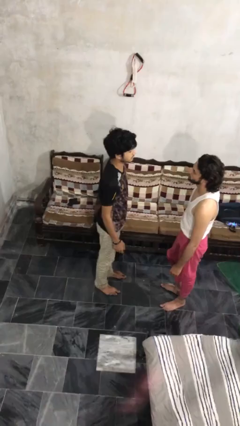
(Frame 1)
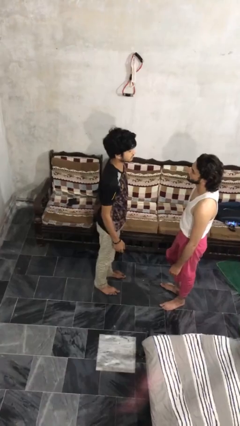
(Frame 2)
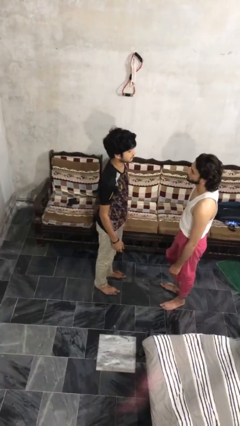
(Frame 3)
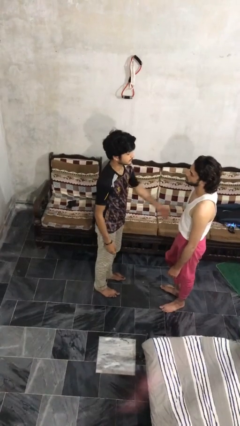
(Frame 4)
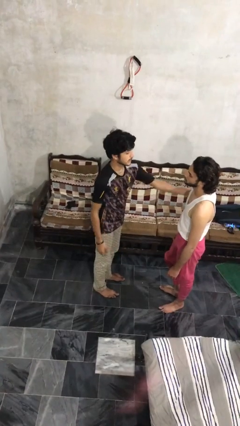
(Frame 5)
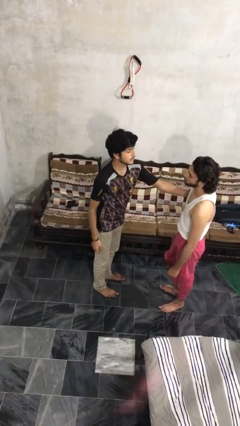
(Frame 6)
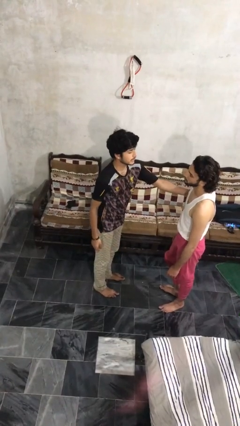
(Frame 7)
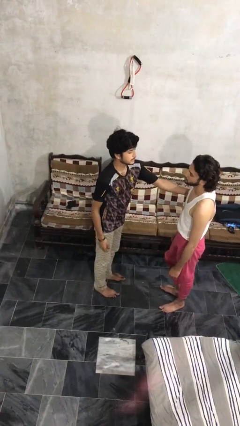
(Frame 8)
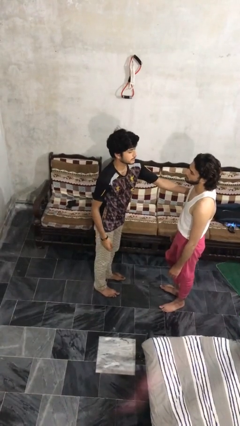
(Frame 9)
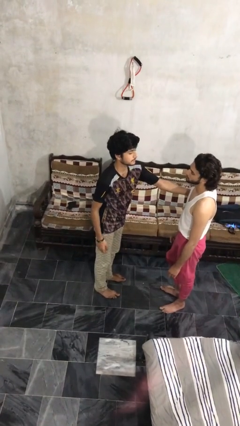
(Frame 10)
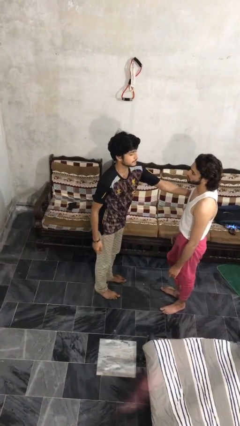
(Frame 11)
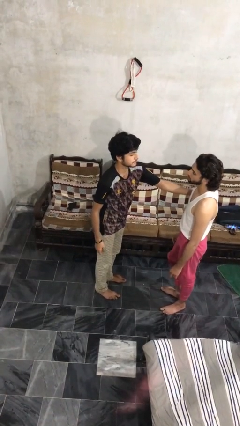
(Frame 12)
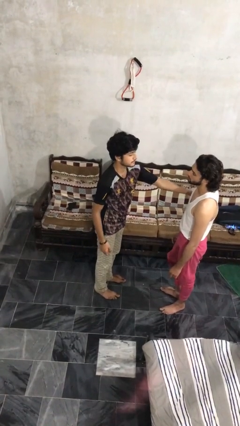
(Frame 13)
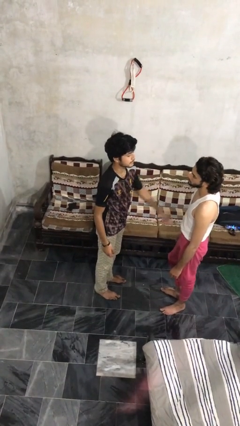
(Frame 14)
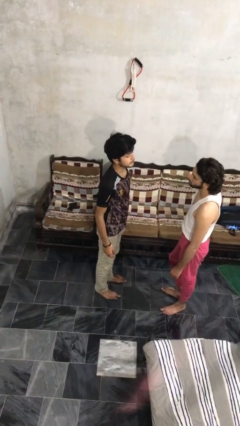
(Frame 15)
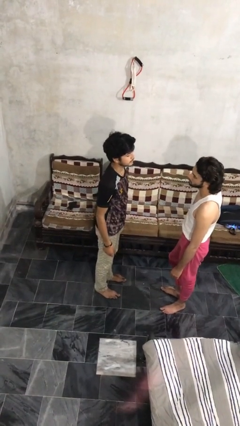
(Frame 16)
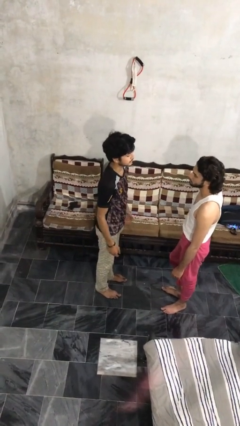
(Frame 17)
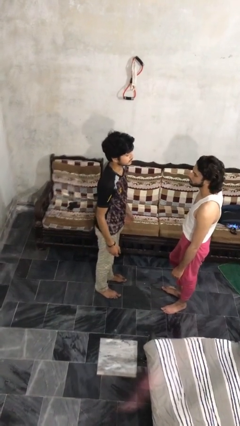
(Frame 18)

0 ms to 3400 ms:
person grabs person by bicep

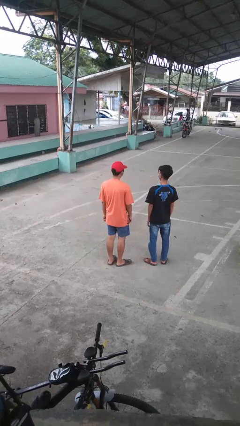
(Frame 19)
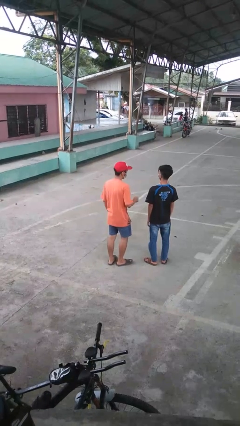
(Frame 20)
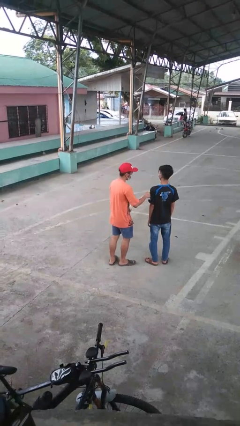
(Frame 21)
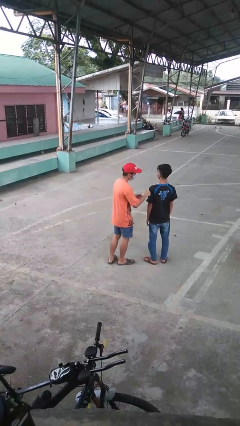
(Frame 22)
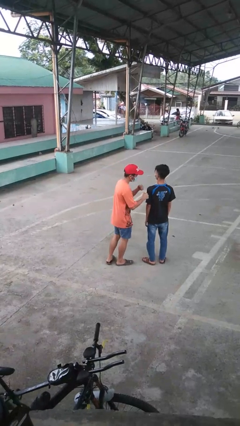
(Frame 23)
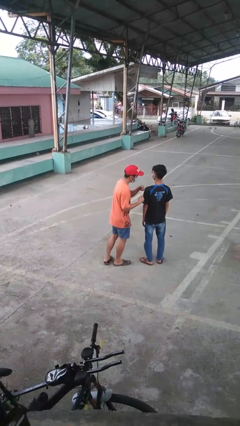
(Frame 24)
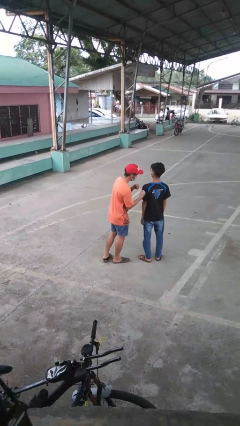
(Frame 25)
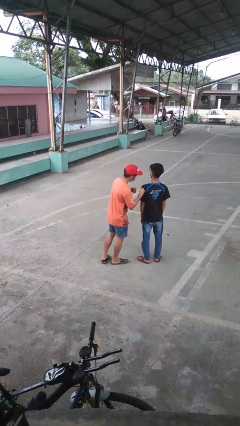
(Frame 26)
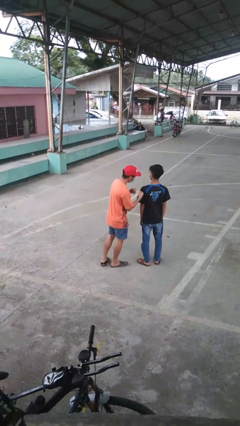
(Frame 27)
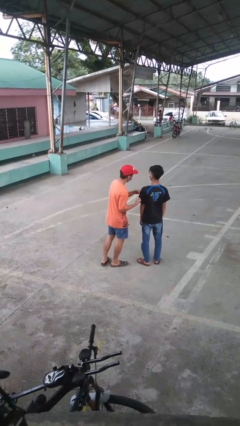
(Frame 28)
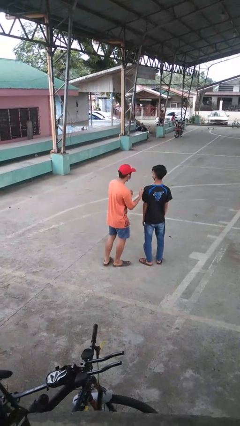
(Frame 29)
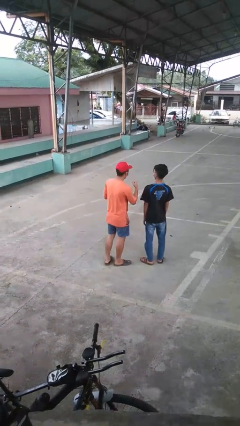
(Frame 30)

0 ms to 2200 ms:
person pounds shoulders of person

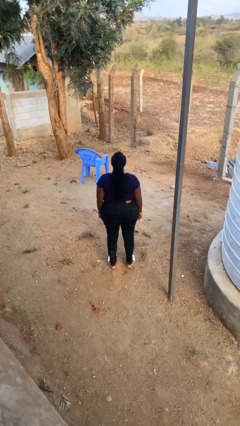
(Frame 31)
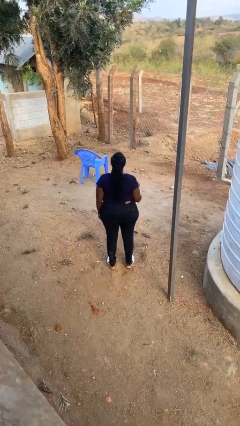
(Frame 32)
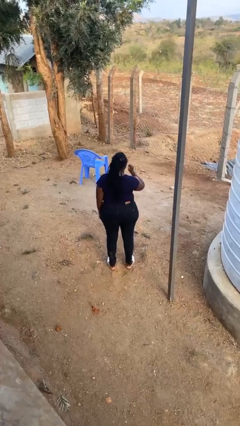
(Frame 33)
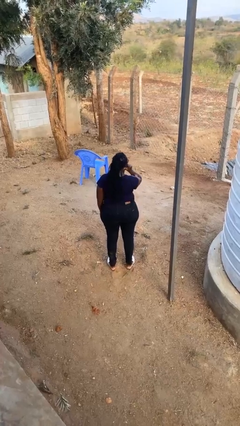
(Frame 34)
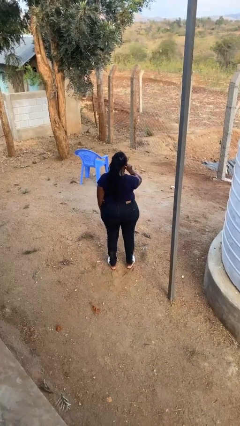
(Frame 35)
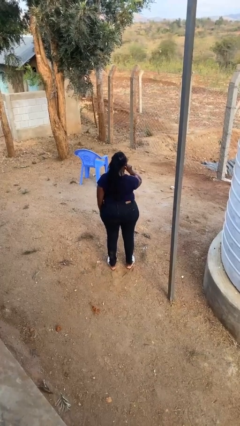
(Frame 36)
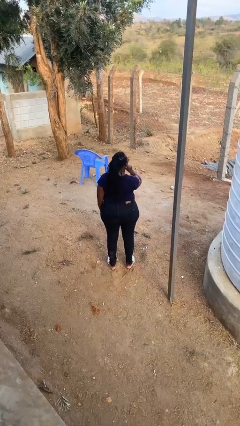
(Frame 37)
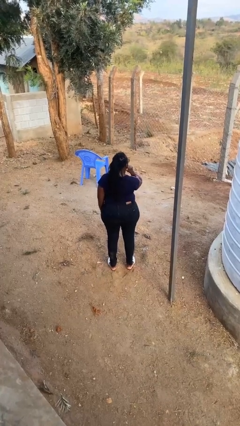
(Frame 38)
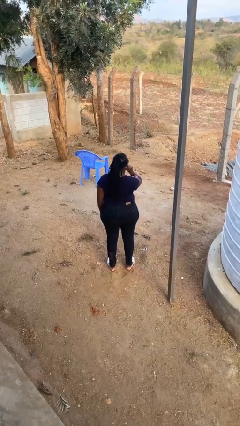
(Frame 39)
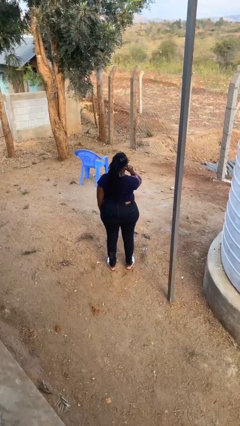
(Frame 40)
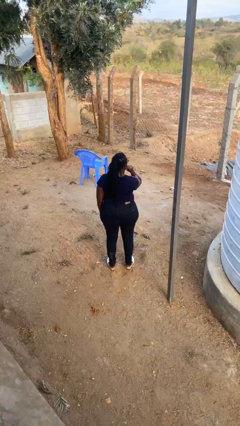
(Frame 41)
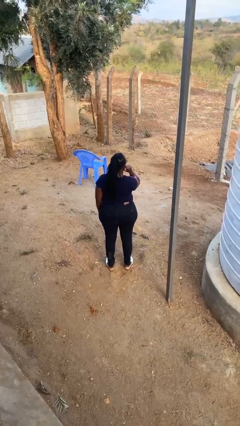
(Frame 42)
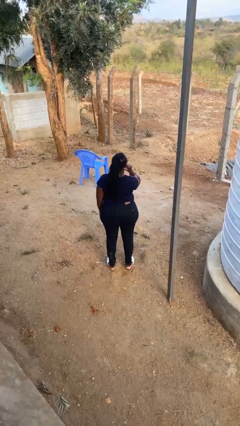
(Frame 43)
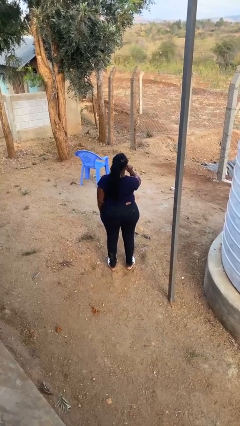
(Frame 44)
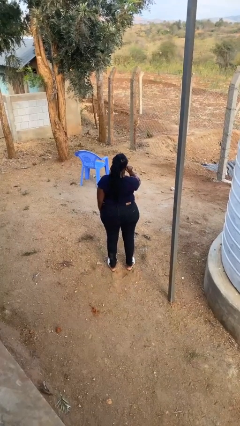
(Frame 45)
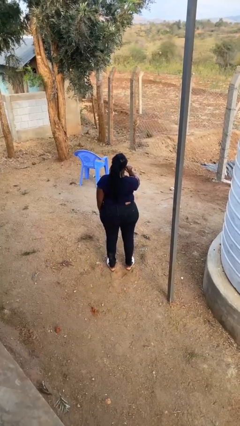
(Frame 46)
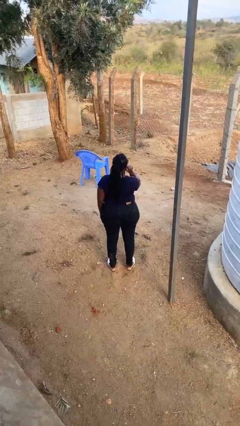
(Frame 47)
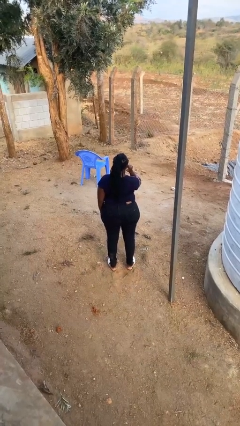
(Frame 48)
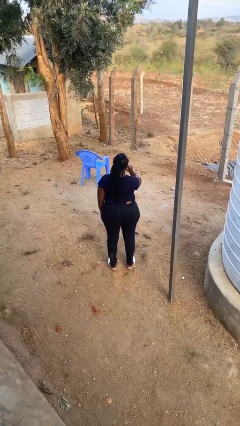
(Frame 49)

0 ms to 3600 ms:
person touches earlobe

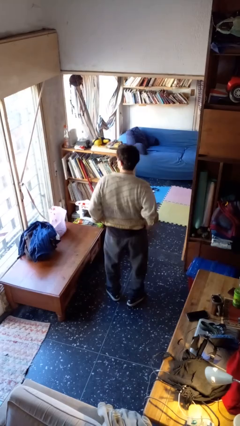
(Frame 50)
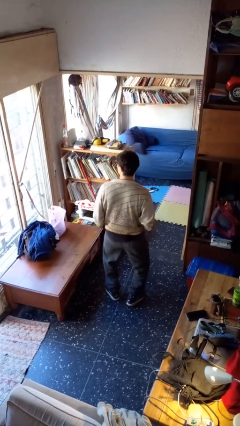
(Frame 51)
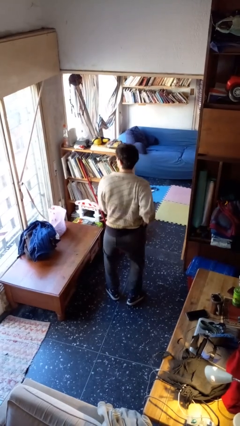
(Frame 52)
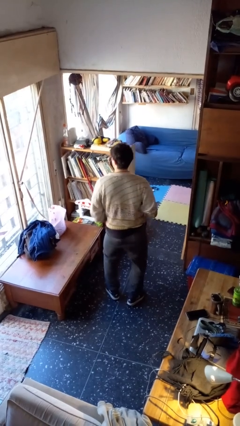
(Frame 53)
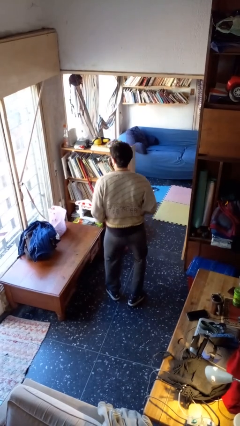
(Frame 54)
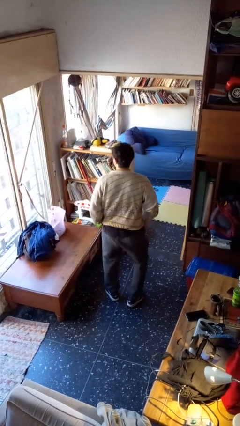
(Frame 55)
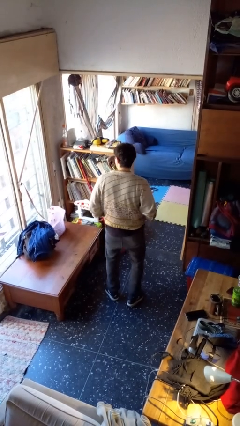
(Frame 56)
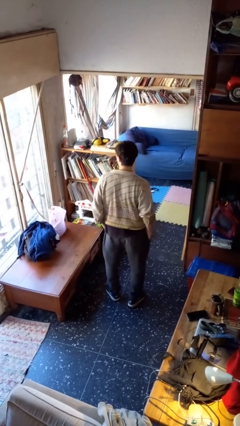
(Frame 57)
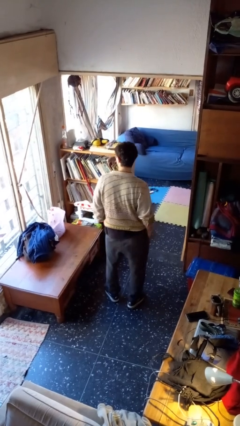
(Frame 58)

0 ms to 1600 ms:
person hikes up pants

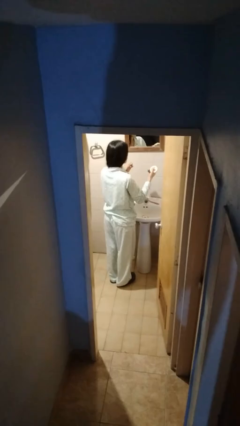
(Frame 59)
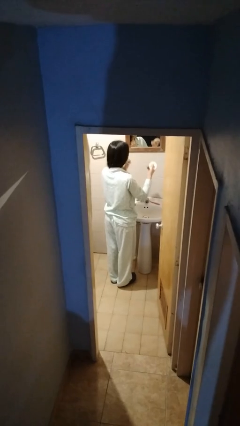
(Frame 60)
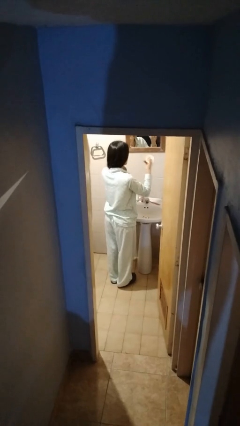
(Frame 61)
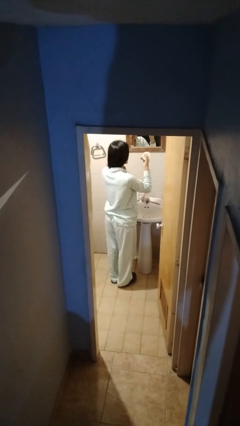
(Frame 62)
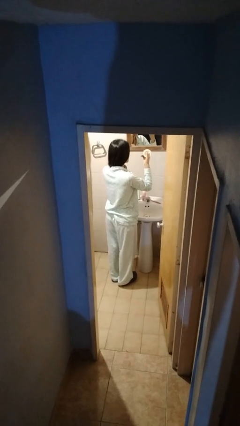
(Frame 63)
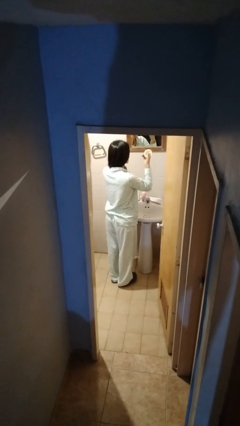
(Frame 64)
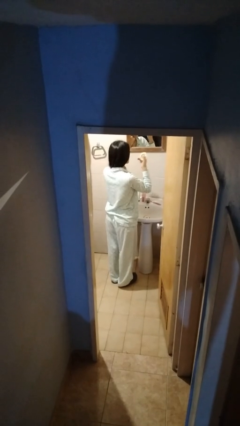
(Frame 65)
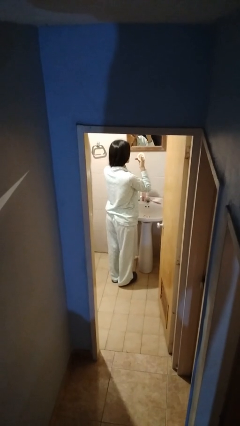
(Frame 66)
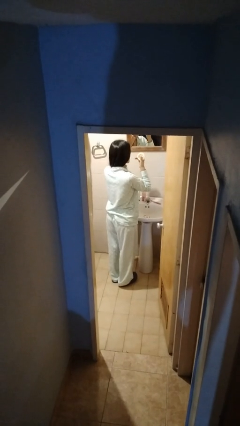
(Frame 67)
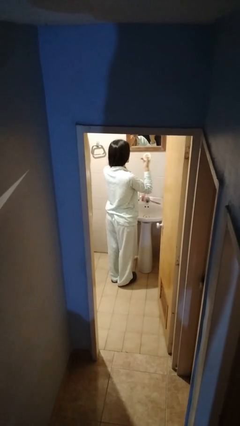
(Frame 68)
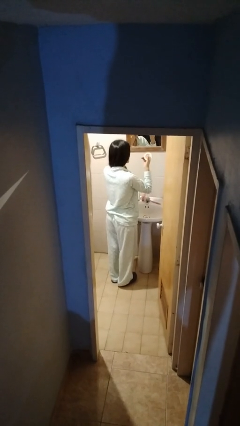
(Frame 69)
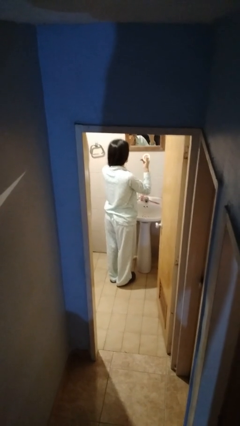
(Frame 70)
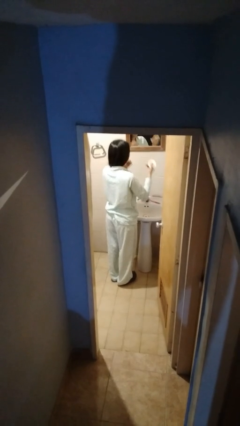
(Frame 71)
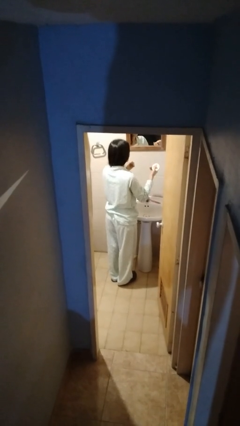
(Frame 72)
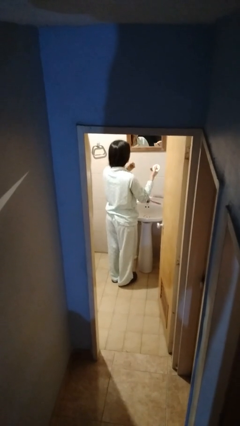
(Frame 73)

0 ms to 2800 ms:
person flosses

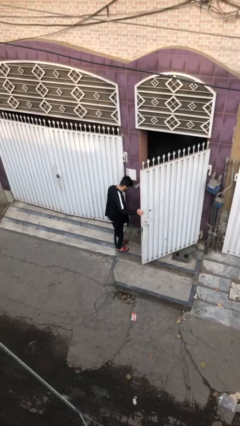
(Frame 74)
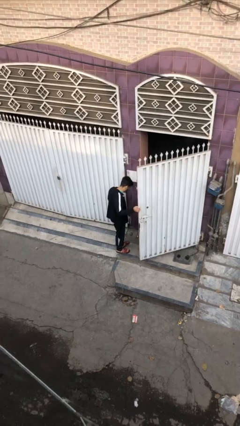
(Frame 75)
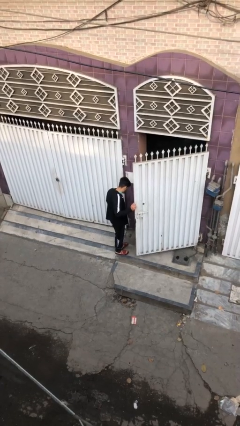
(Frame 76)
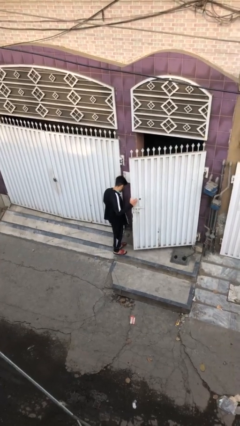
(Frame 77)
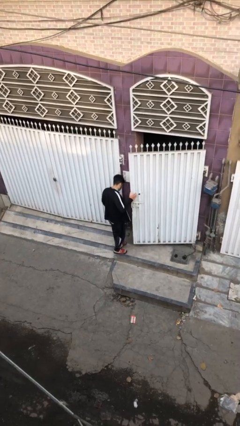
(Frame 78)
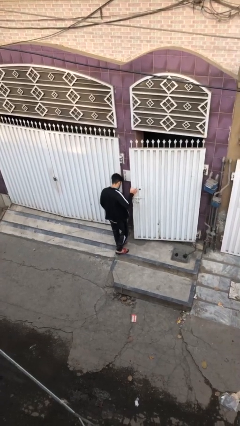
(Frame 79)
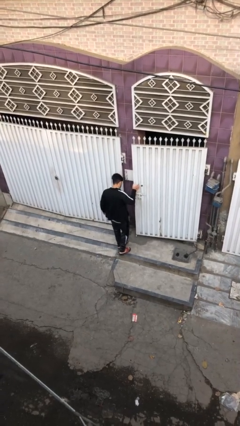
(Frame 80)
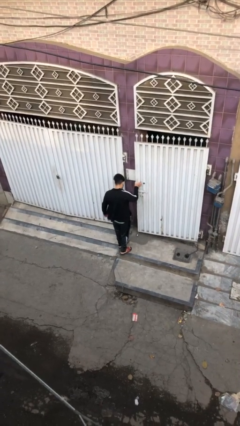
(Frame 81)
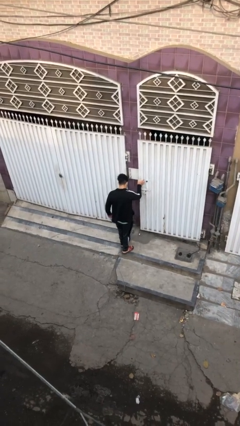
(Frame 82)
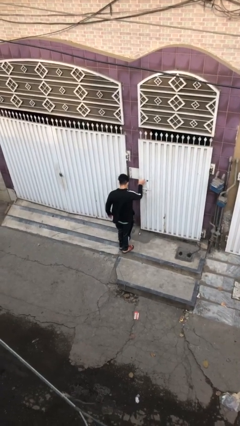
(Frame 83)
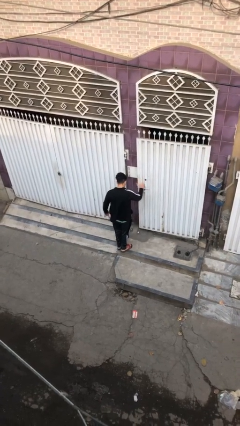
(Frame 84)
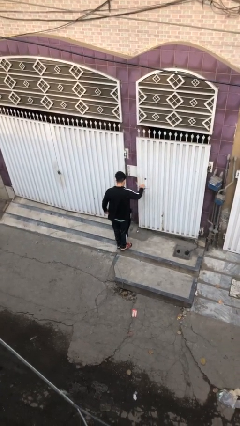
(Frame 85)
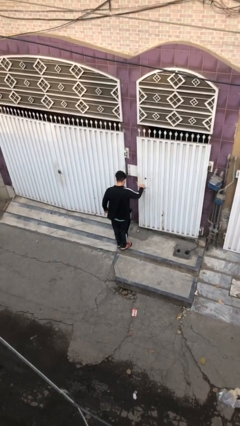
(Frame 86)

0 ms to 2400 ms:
person closes facility door

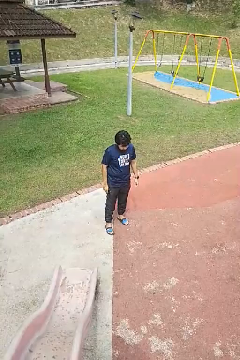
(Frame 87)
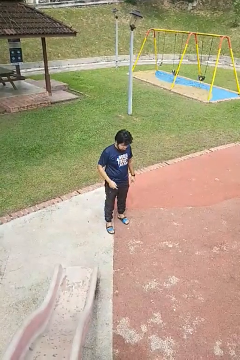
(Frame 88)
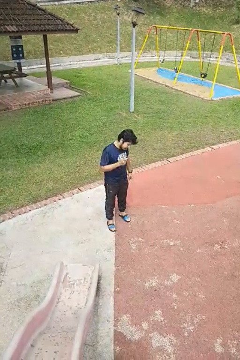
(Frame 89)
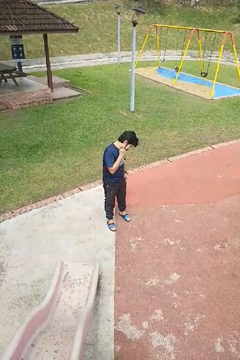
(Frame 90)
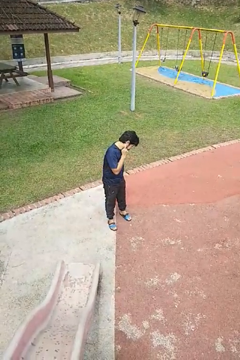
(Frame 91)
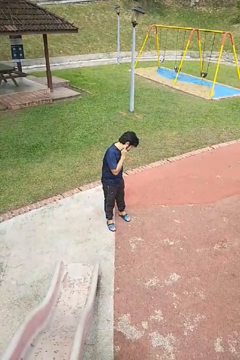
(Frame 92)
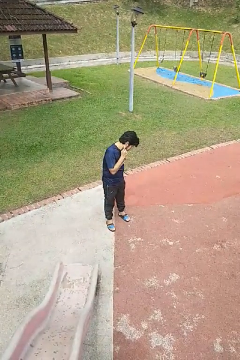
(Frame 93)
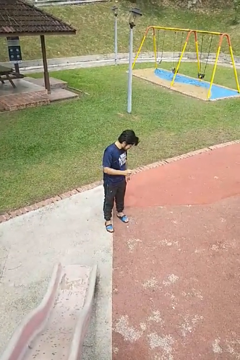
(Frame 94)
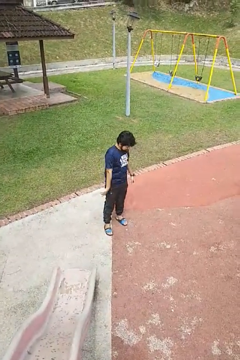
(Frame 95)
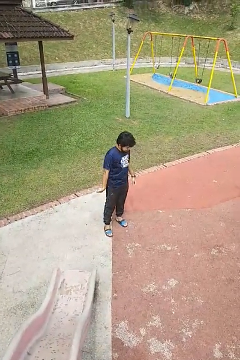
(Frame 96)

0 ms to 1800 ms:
person gestures listen closely
